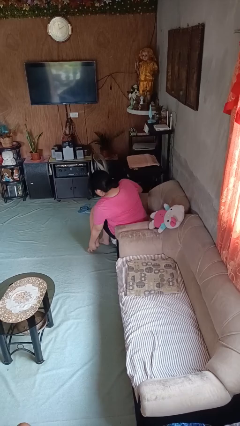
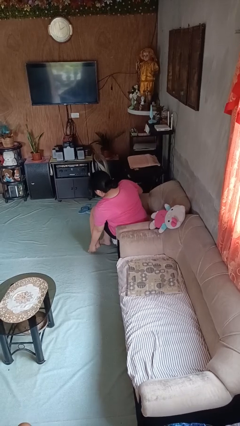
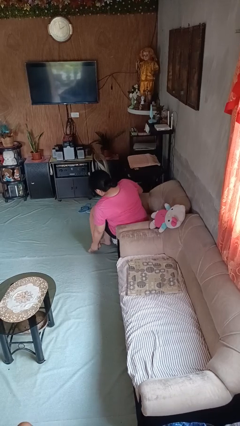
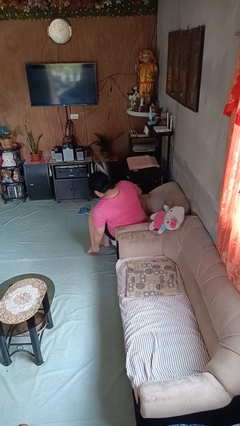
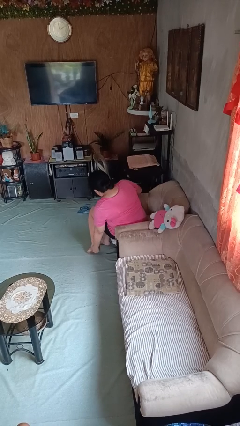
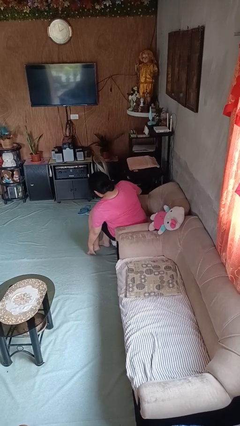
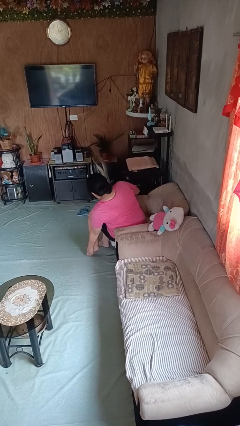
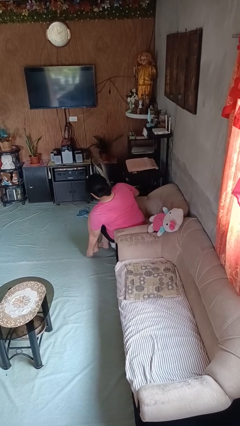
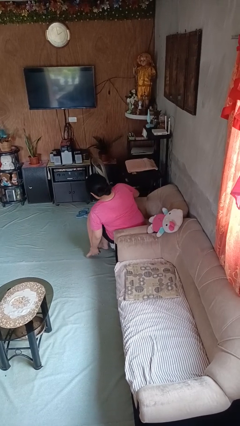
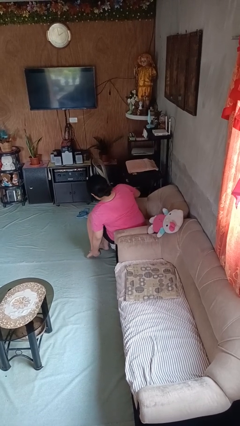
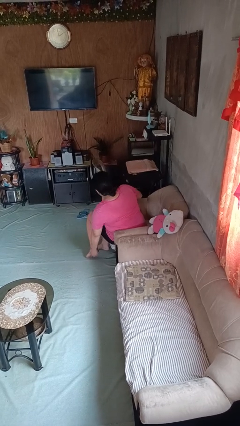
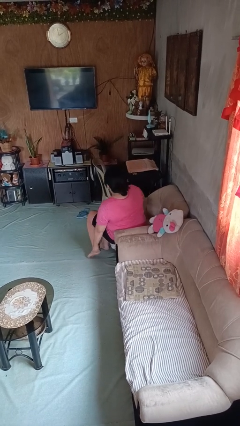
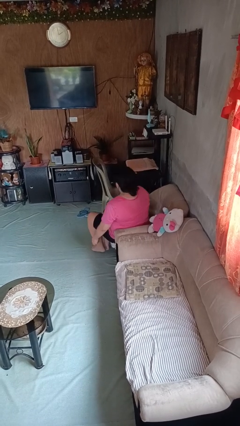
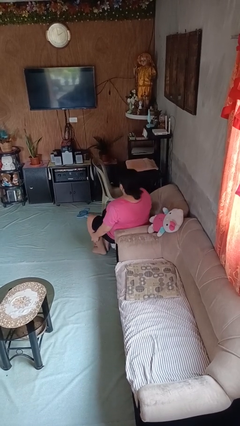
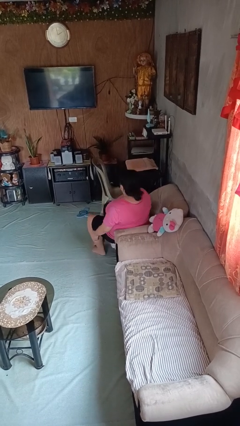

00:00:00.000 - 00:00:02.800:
person rubs foot

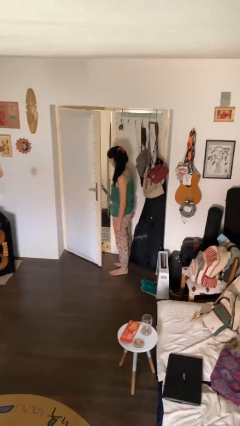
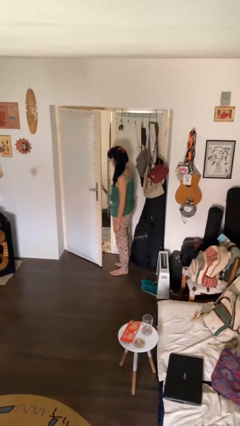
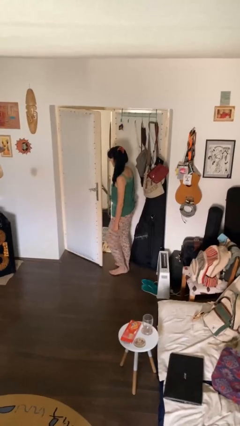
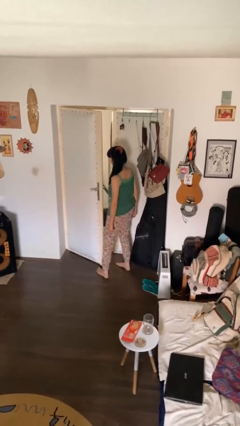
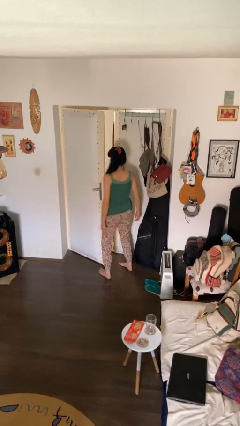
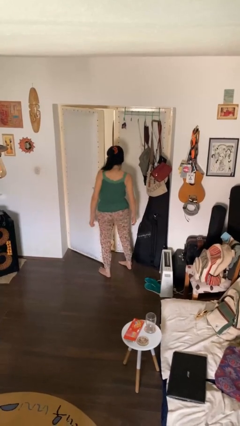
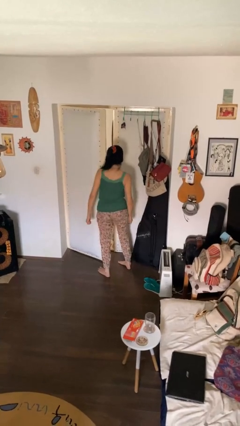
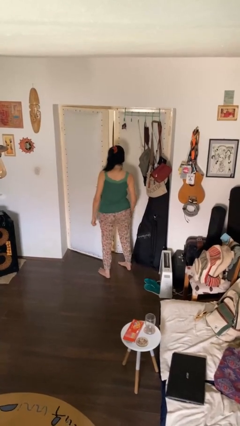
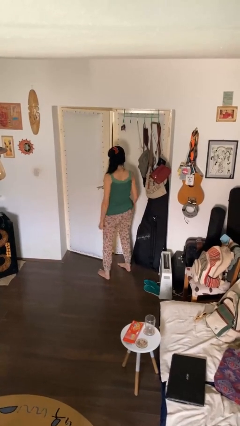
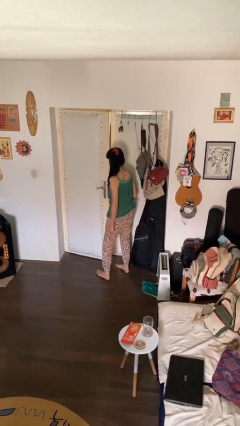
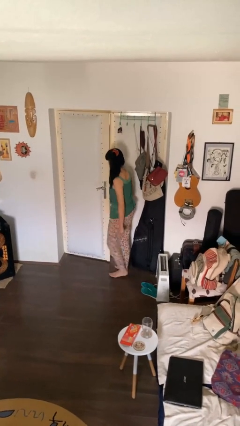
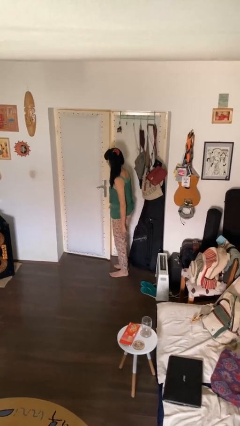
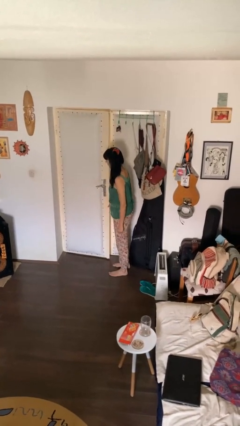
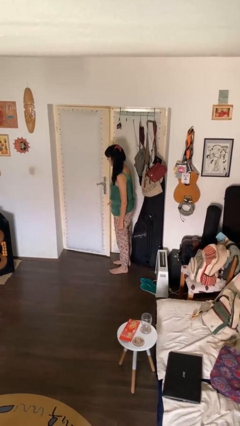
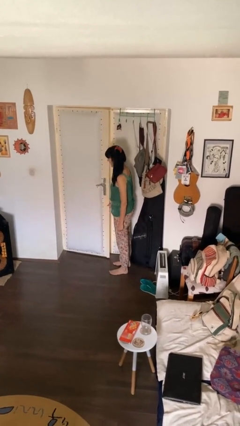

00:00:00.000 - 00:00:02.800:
person closes door with hip

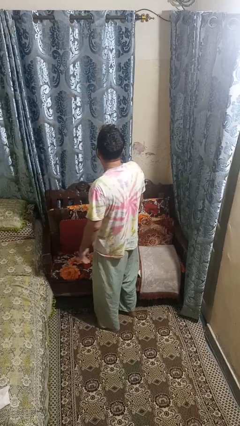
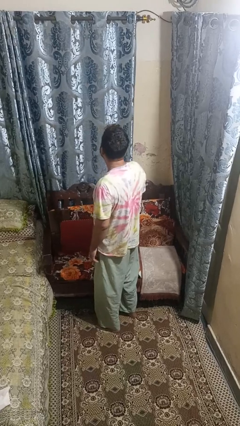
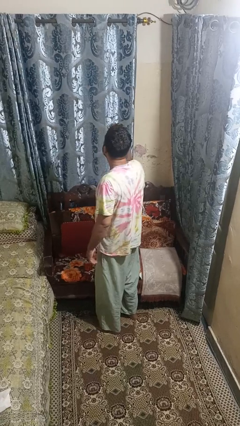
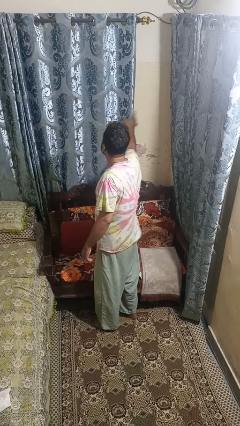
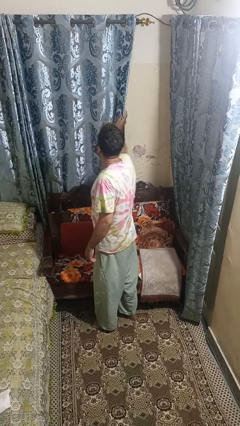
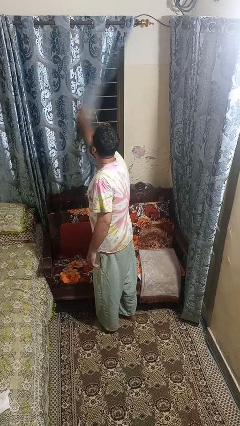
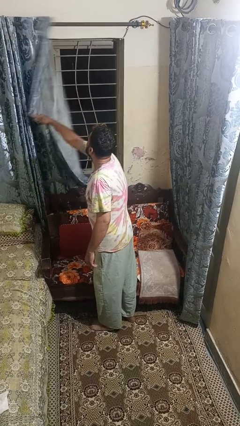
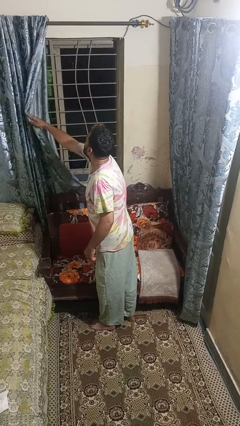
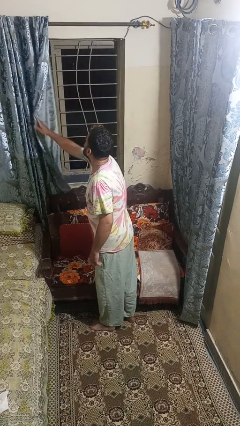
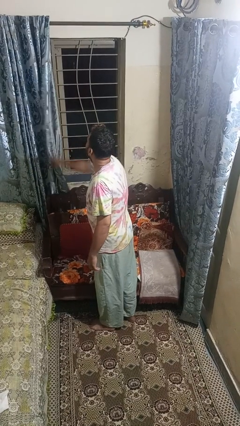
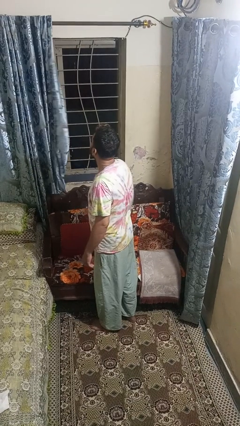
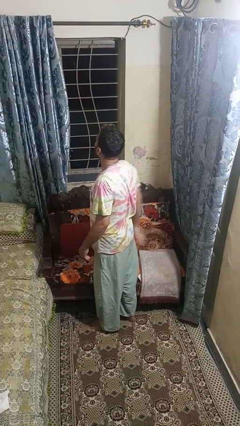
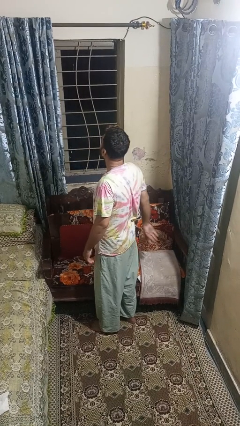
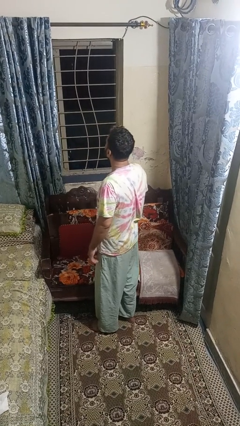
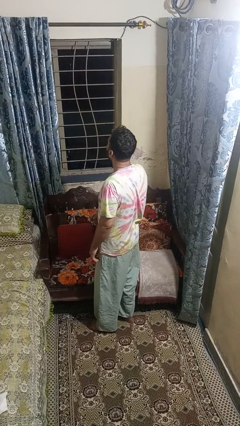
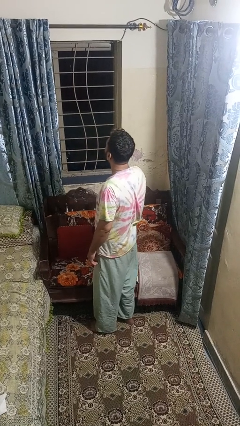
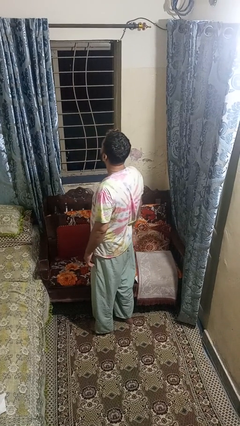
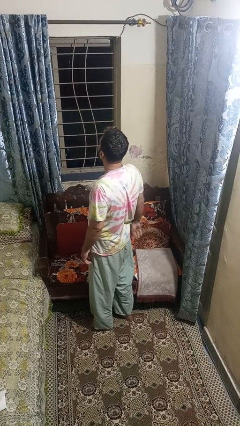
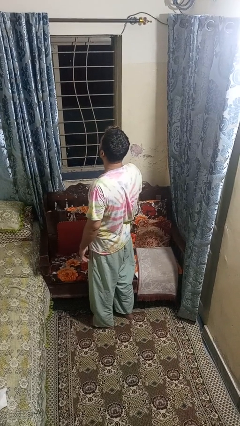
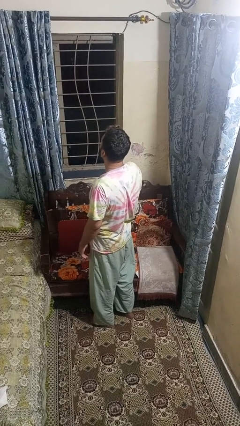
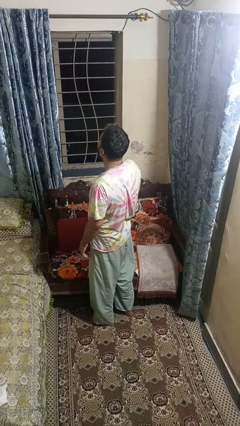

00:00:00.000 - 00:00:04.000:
person opens curtains

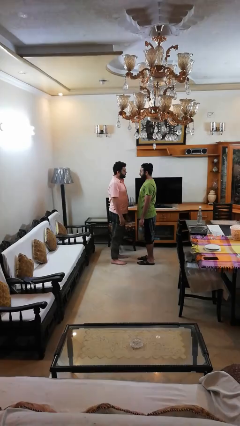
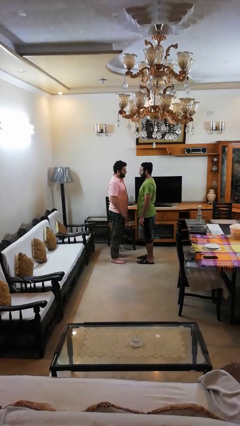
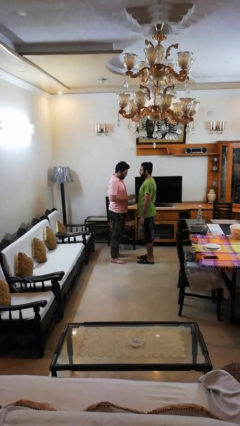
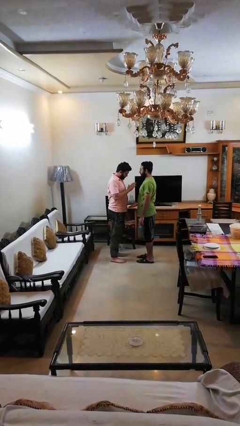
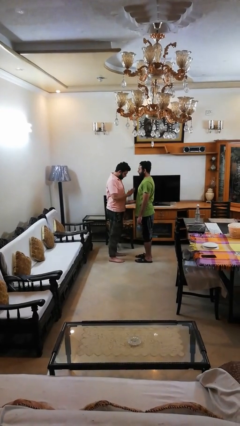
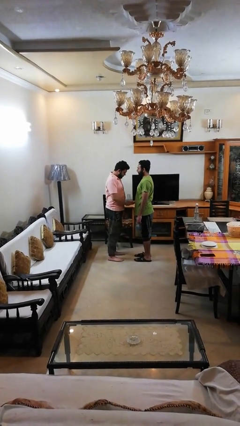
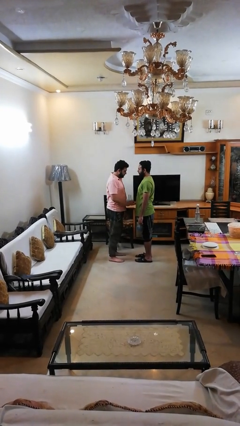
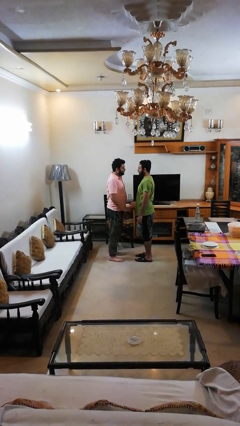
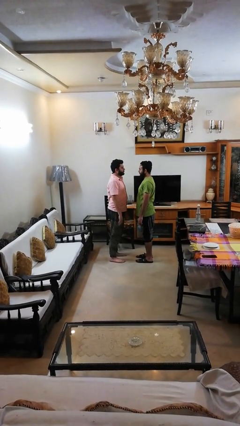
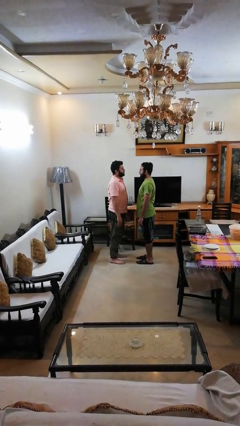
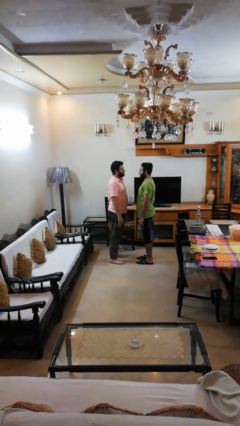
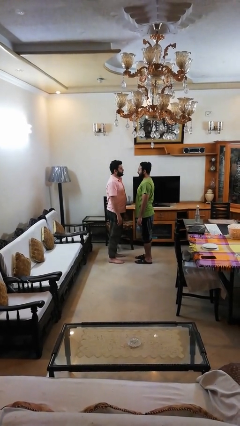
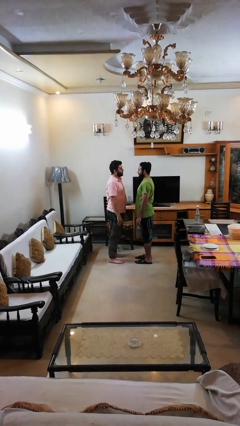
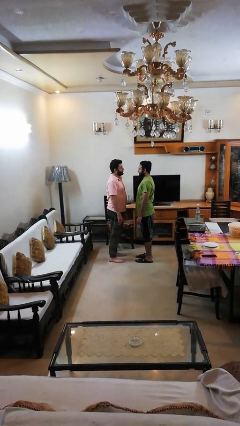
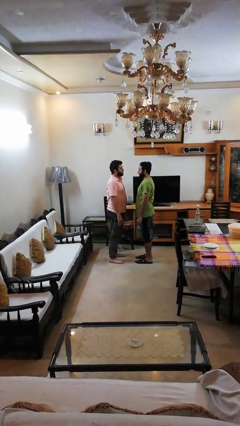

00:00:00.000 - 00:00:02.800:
person highfives hand

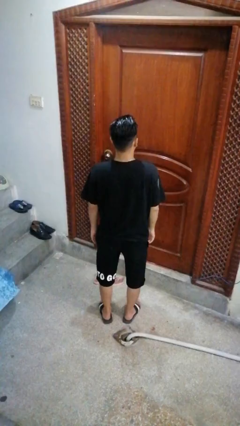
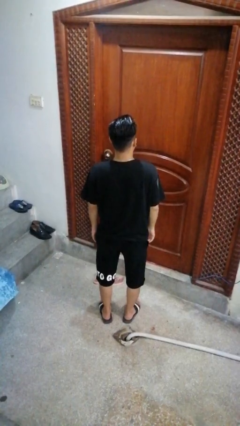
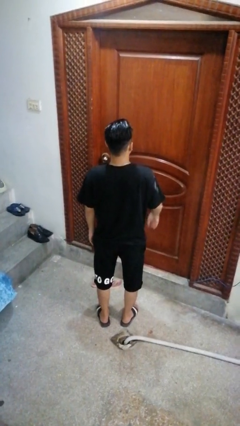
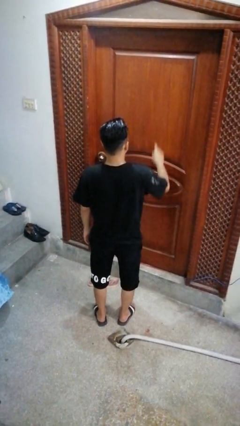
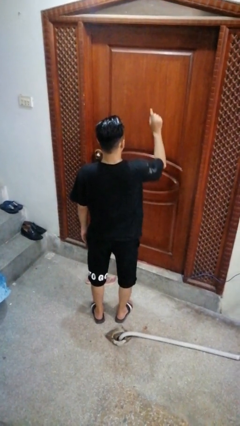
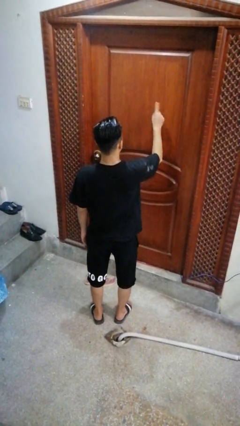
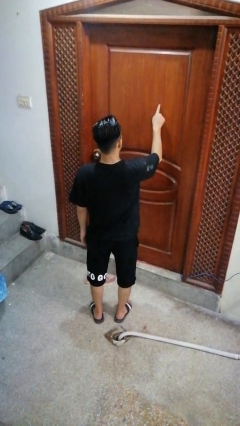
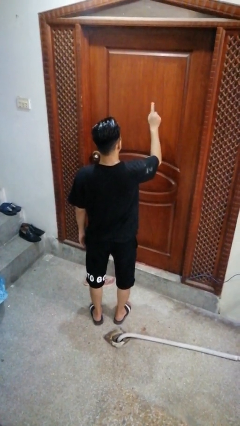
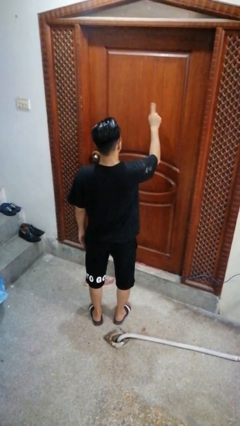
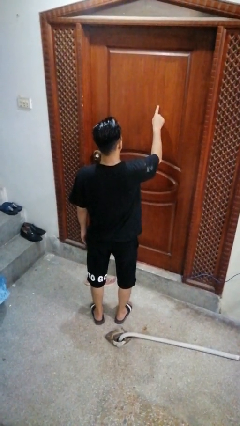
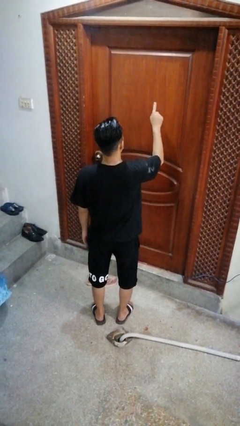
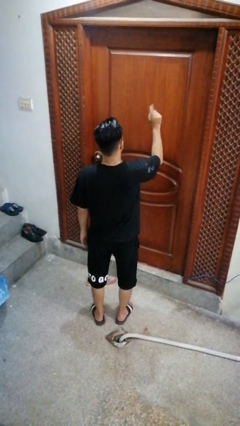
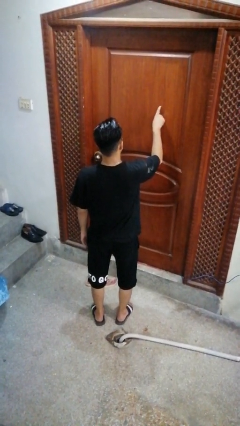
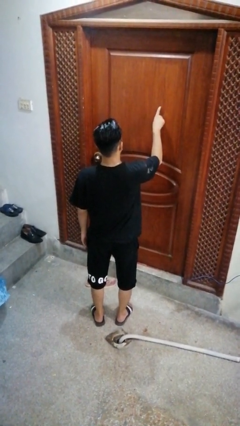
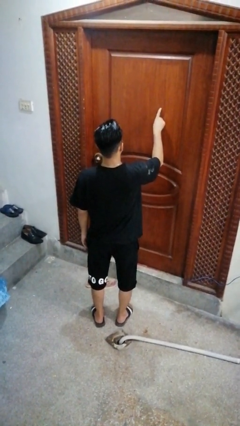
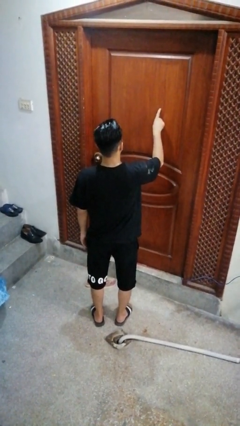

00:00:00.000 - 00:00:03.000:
person taps object with finger

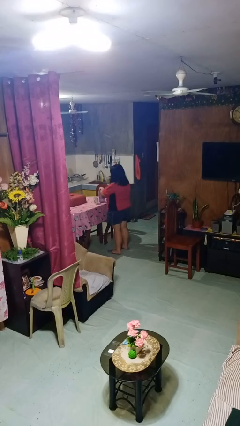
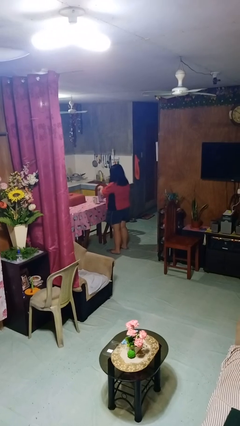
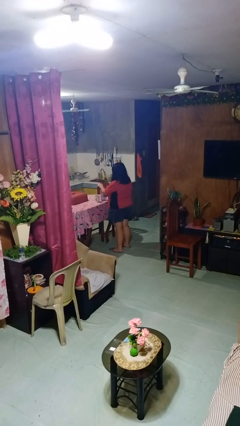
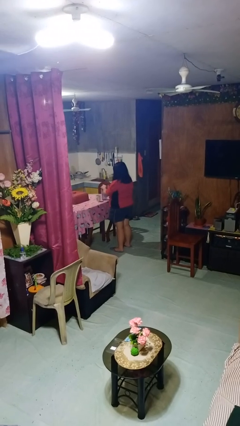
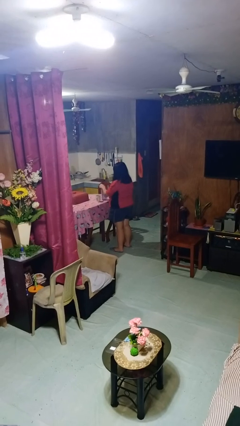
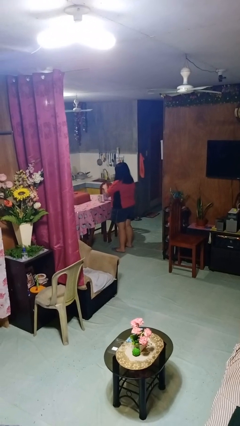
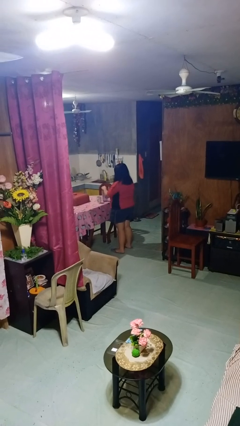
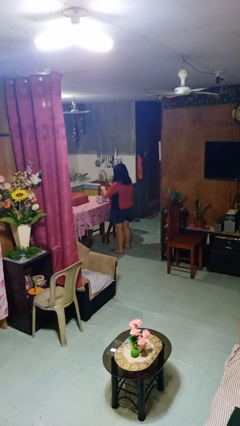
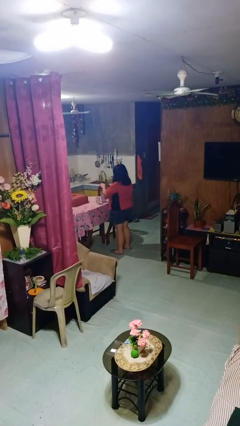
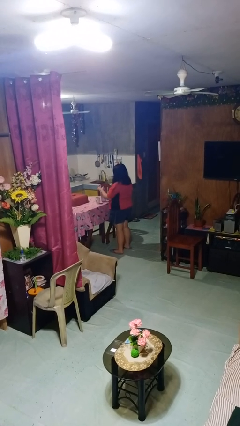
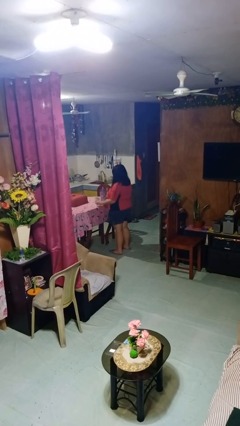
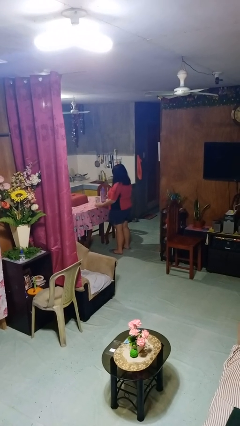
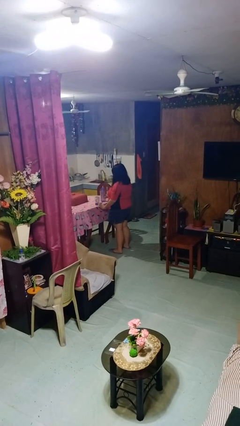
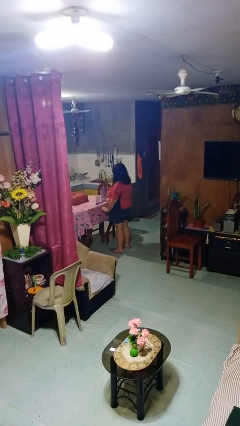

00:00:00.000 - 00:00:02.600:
person unscrews lid from bottle
